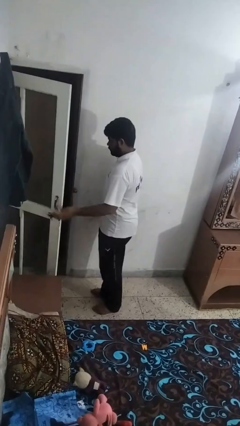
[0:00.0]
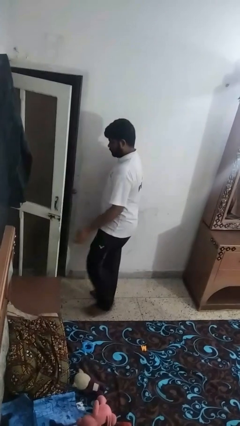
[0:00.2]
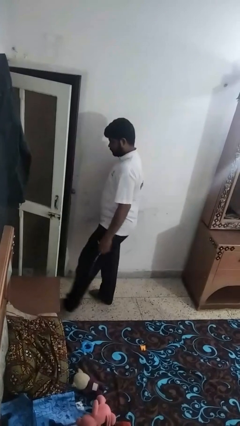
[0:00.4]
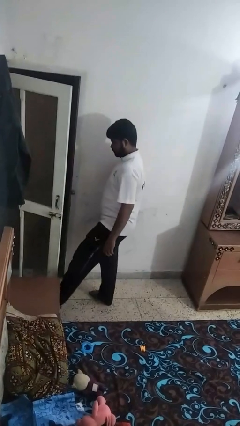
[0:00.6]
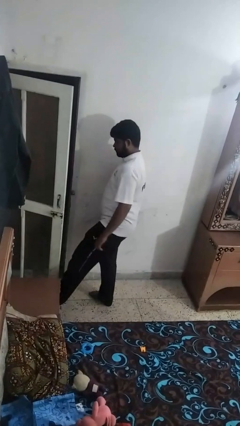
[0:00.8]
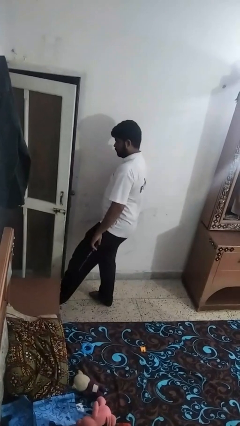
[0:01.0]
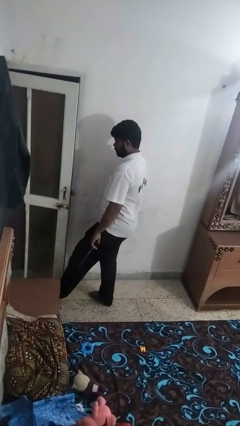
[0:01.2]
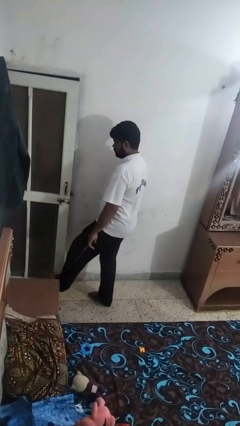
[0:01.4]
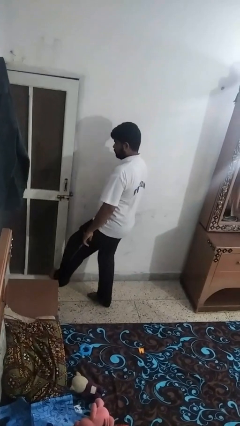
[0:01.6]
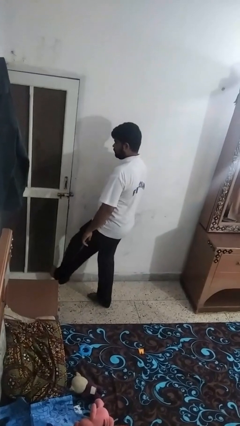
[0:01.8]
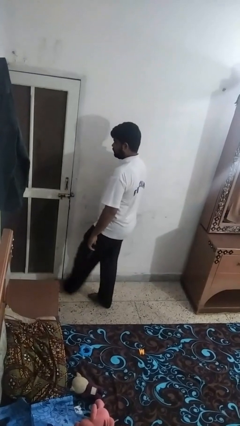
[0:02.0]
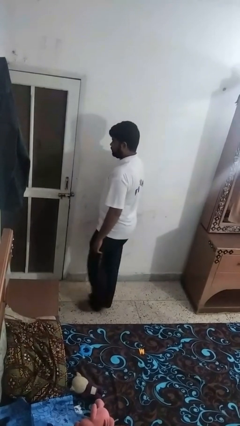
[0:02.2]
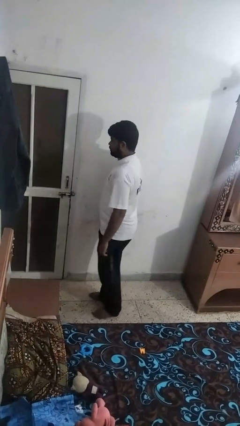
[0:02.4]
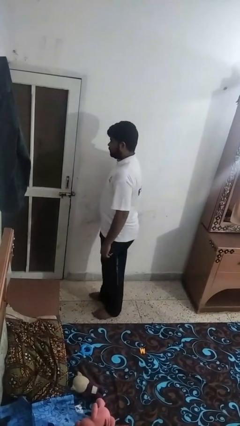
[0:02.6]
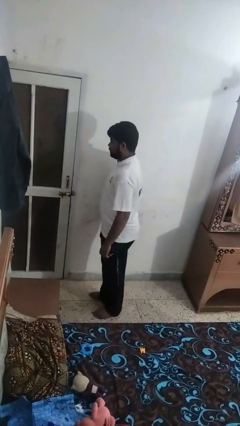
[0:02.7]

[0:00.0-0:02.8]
person closes door with foot

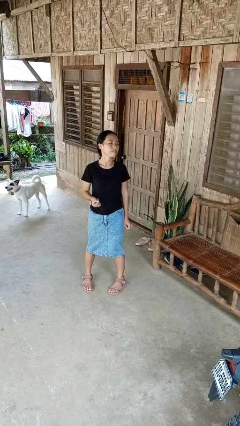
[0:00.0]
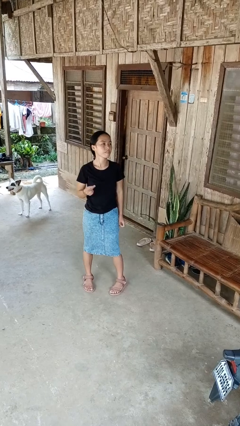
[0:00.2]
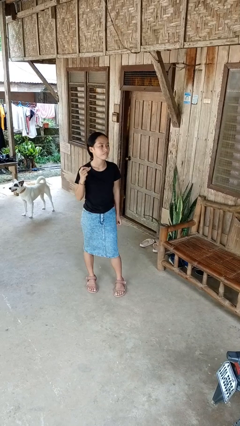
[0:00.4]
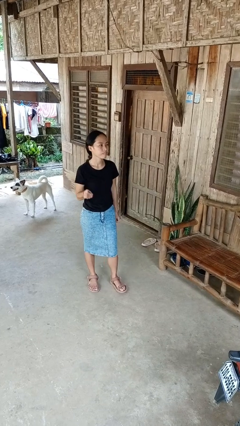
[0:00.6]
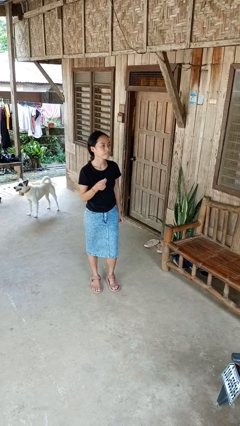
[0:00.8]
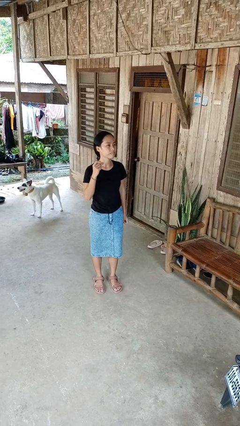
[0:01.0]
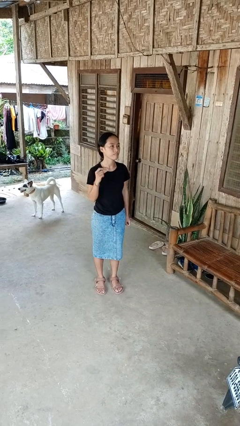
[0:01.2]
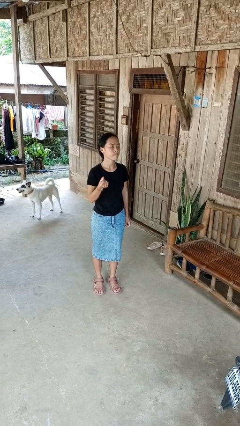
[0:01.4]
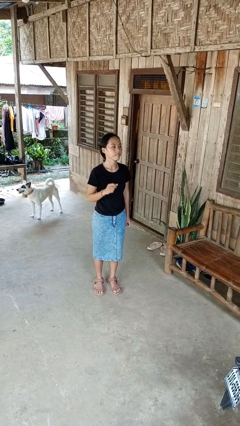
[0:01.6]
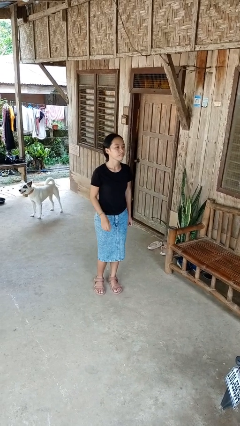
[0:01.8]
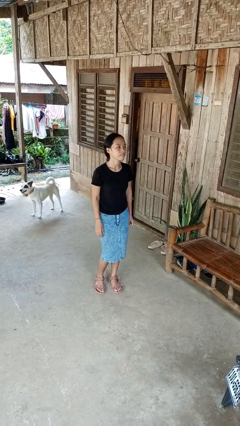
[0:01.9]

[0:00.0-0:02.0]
person snaps fingers

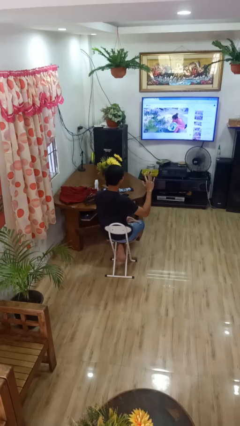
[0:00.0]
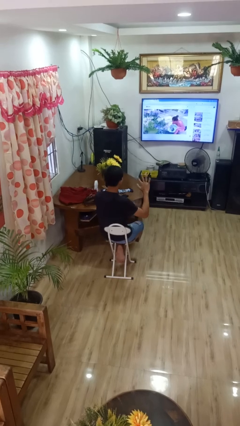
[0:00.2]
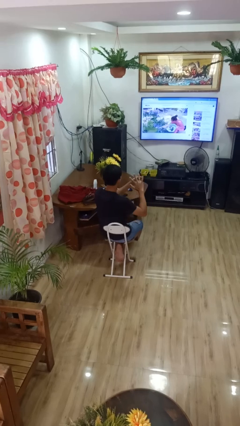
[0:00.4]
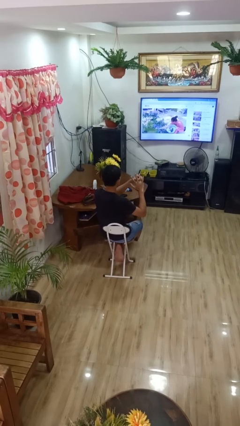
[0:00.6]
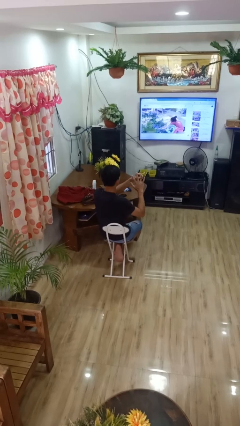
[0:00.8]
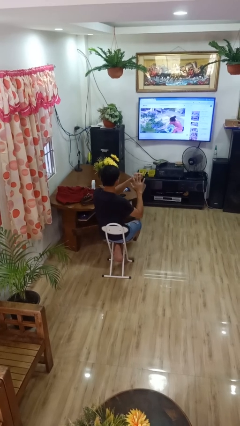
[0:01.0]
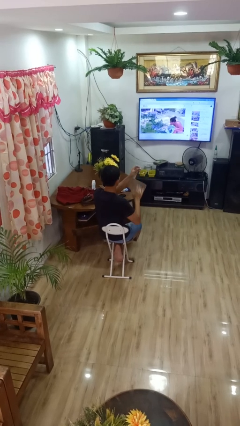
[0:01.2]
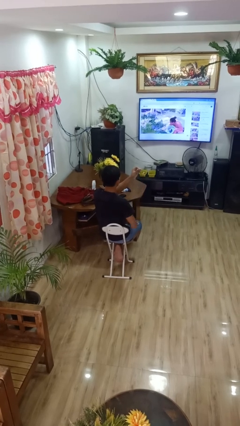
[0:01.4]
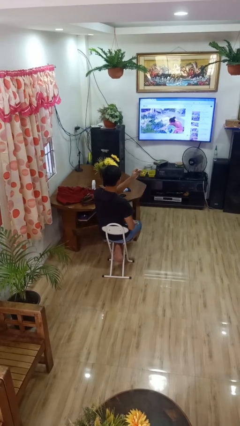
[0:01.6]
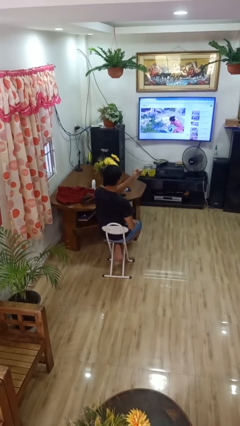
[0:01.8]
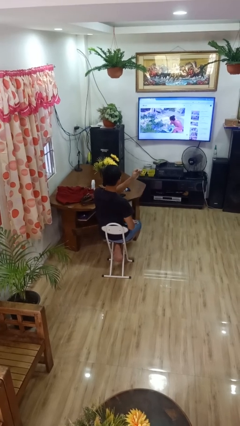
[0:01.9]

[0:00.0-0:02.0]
person takes off ring

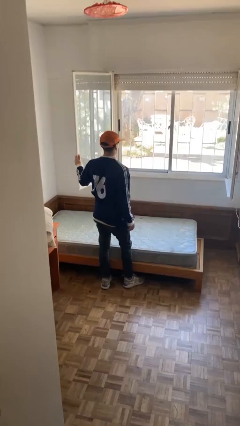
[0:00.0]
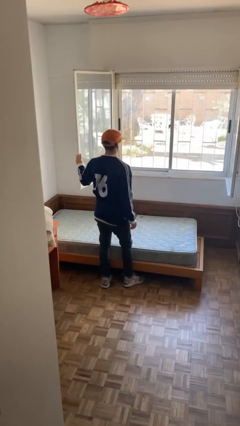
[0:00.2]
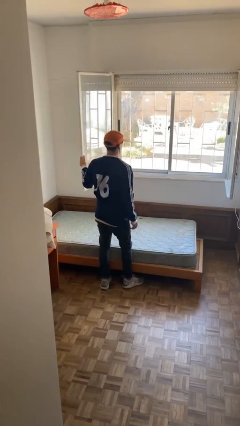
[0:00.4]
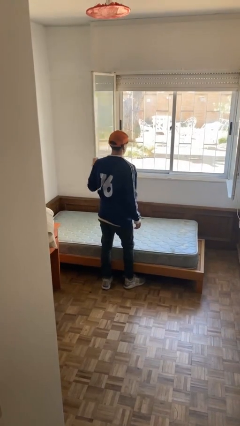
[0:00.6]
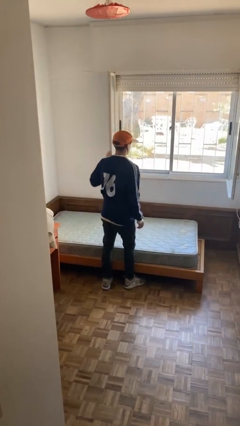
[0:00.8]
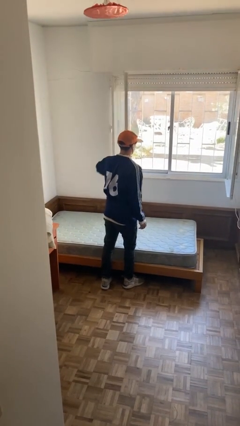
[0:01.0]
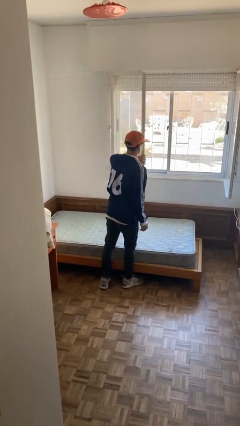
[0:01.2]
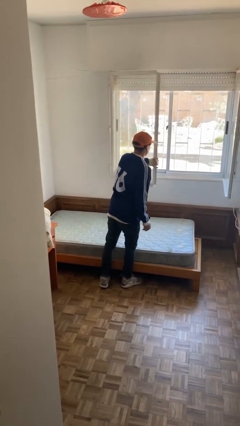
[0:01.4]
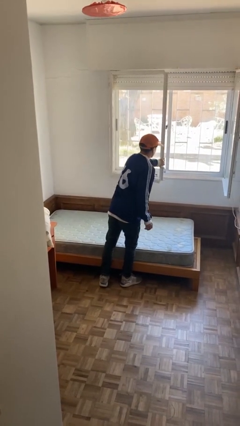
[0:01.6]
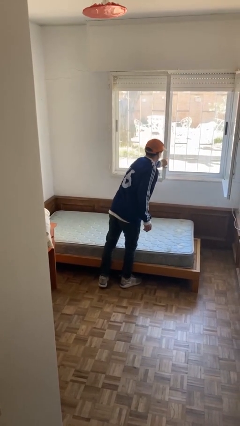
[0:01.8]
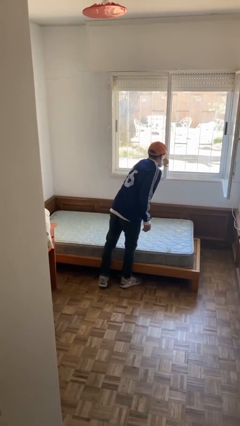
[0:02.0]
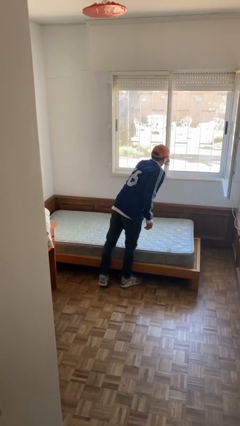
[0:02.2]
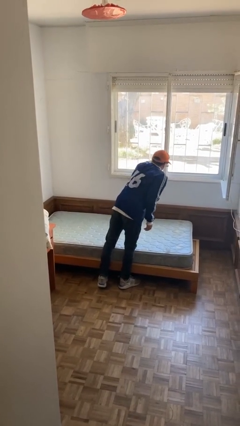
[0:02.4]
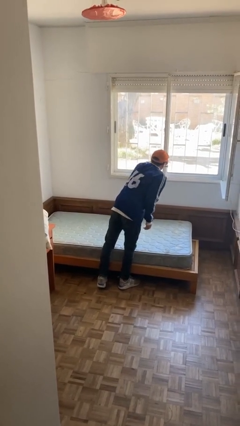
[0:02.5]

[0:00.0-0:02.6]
person closes home window

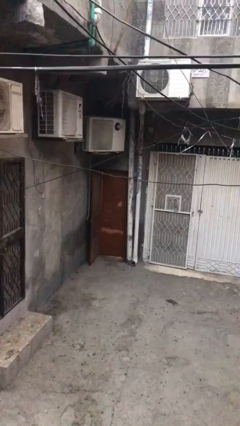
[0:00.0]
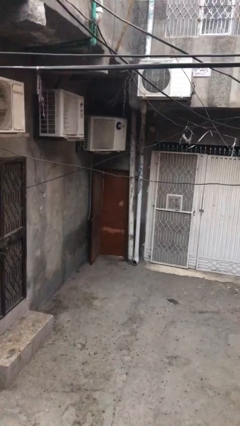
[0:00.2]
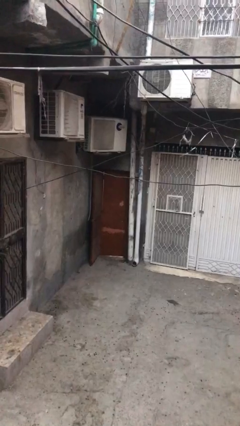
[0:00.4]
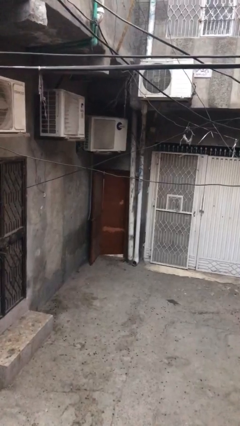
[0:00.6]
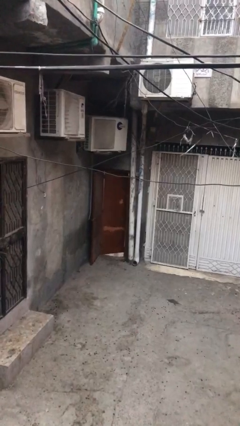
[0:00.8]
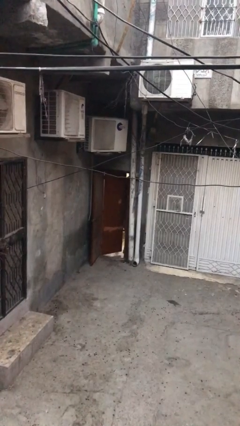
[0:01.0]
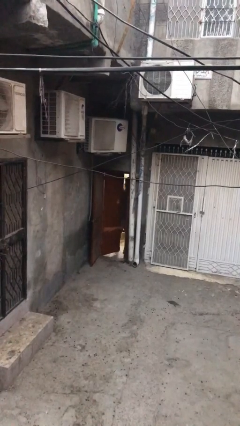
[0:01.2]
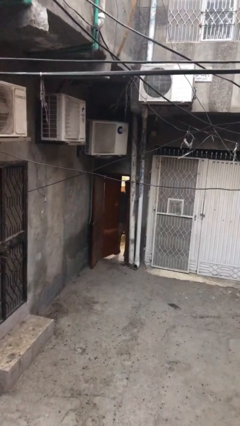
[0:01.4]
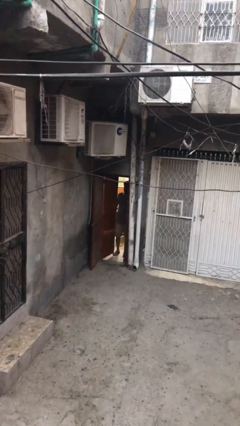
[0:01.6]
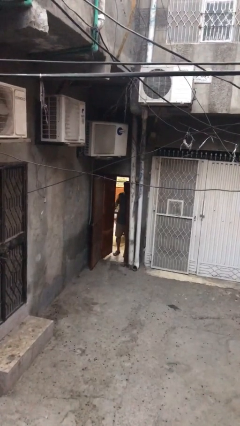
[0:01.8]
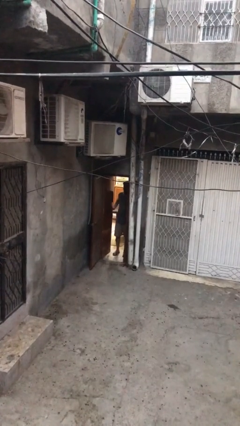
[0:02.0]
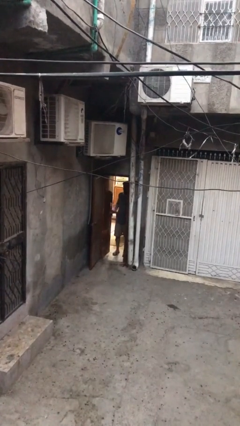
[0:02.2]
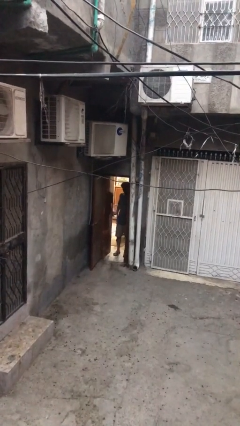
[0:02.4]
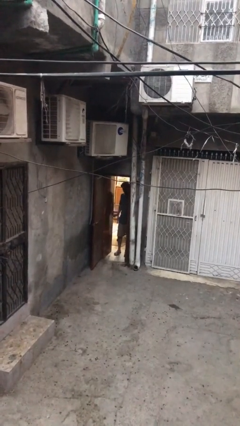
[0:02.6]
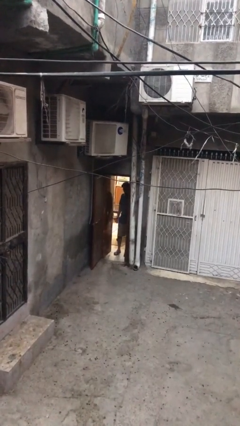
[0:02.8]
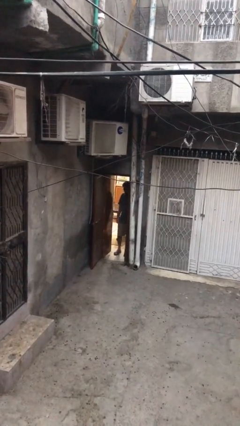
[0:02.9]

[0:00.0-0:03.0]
person opens facility door

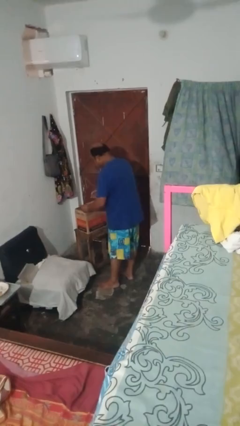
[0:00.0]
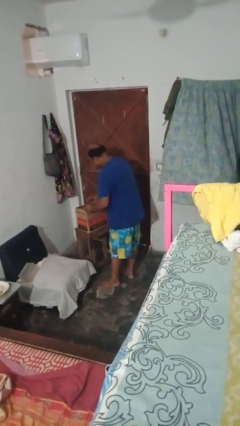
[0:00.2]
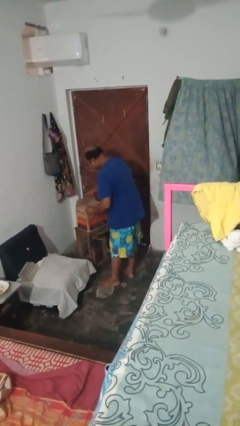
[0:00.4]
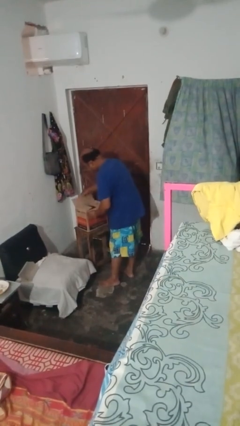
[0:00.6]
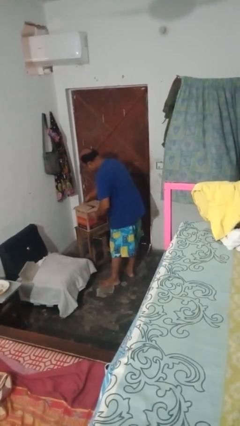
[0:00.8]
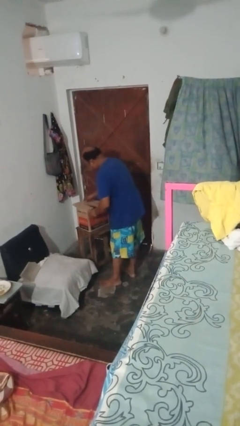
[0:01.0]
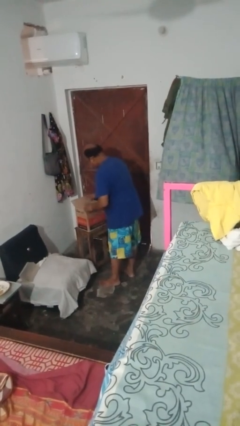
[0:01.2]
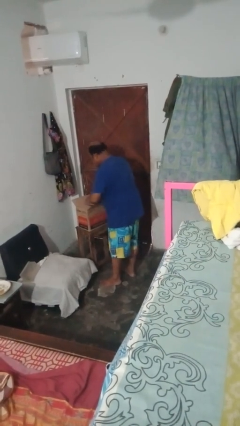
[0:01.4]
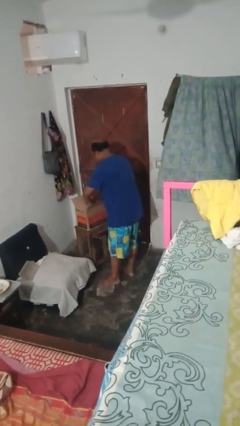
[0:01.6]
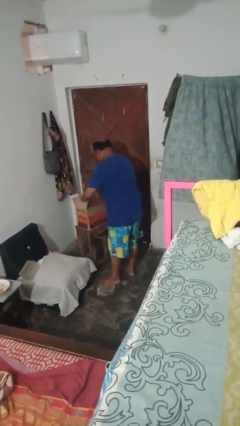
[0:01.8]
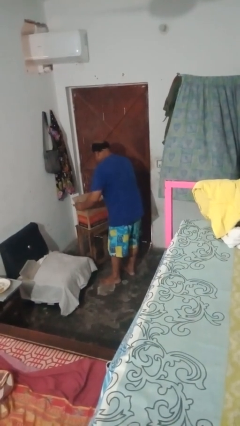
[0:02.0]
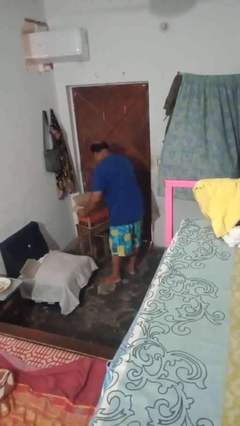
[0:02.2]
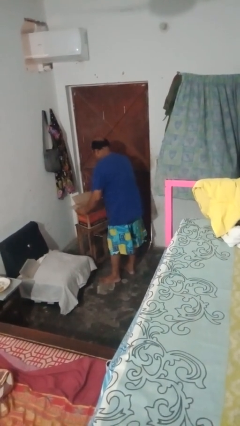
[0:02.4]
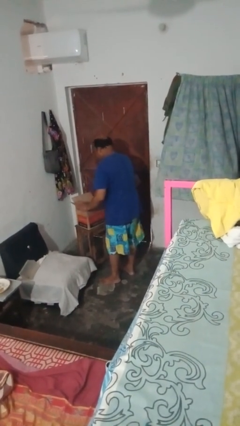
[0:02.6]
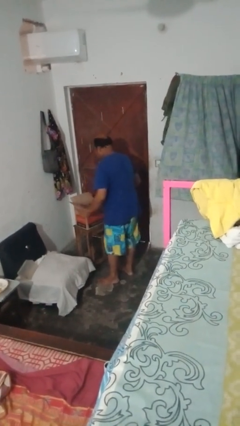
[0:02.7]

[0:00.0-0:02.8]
person opens box

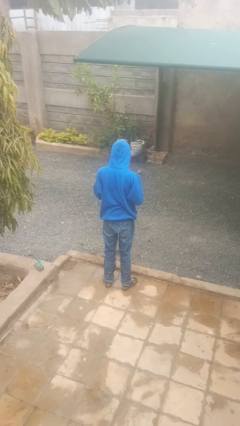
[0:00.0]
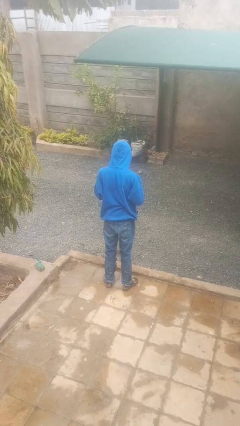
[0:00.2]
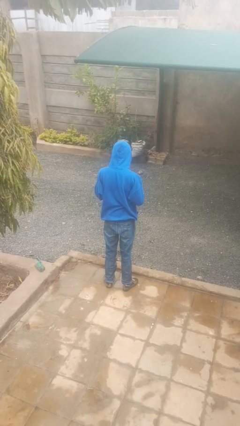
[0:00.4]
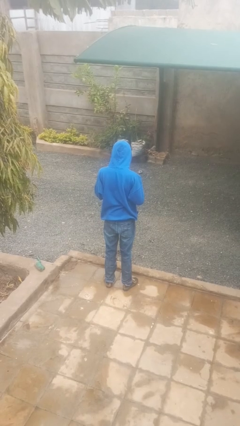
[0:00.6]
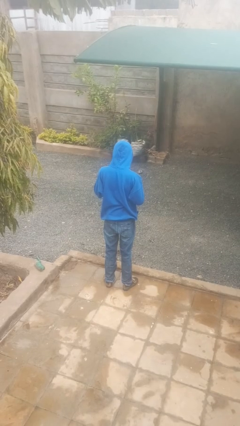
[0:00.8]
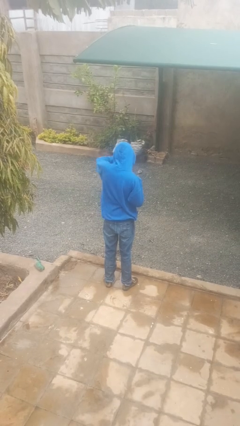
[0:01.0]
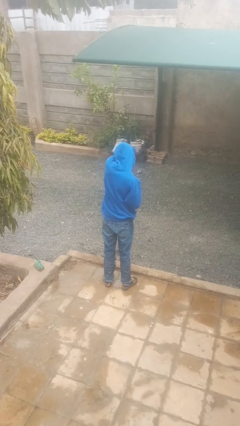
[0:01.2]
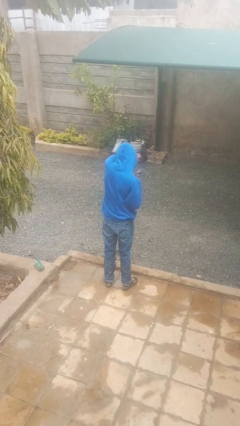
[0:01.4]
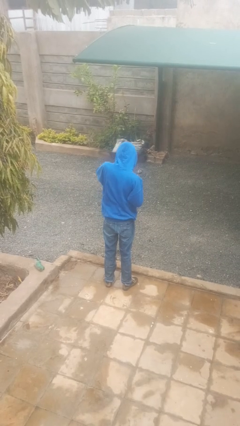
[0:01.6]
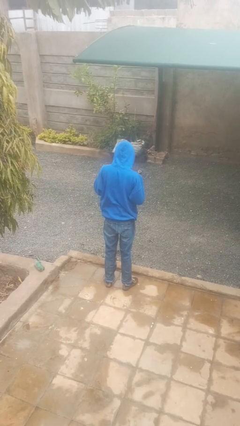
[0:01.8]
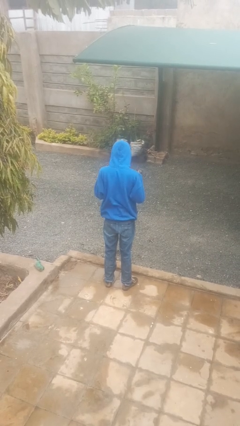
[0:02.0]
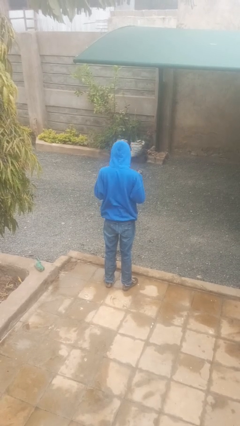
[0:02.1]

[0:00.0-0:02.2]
person punches
